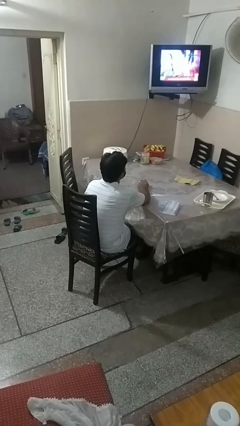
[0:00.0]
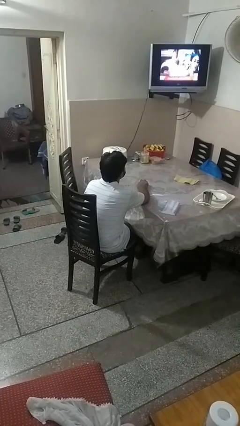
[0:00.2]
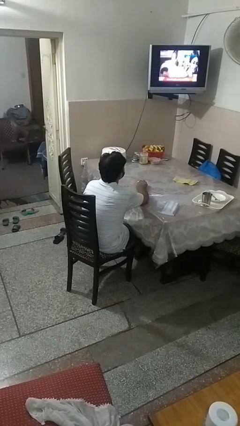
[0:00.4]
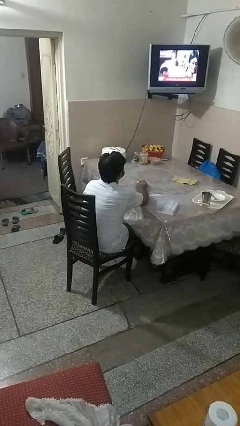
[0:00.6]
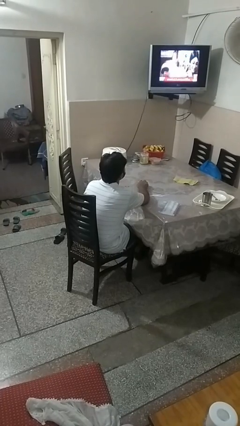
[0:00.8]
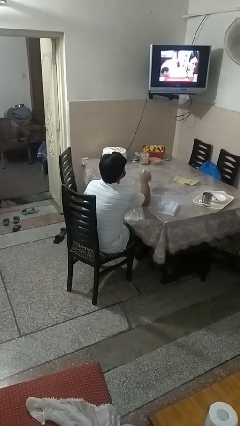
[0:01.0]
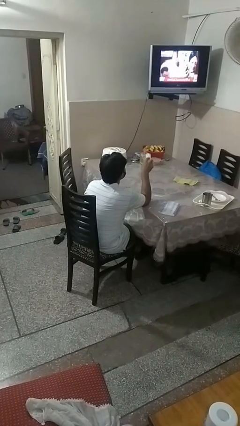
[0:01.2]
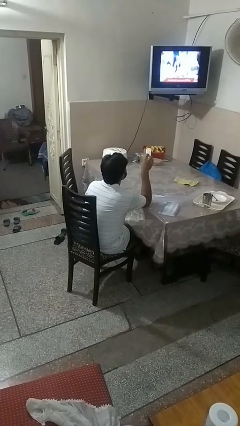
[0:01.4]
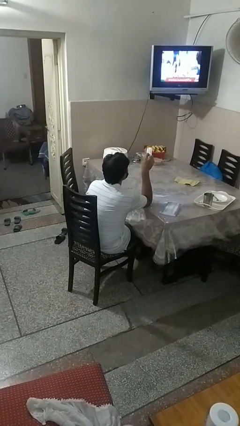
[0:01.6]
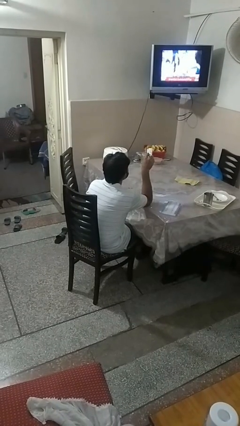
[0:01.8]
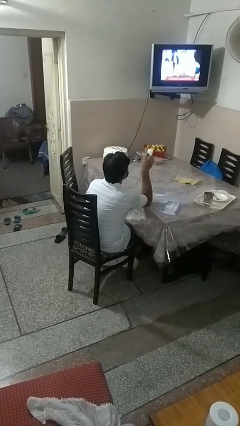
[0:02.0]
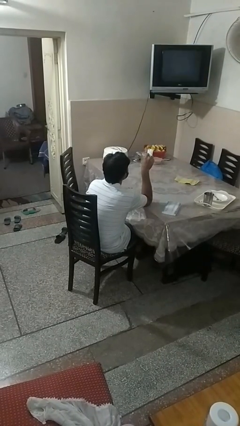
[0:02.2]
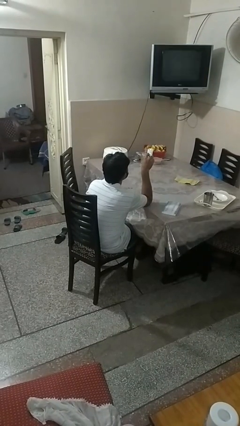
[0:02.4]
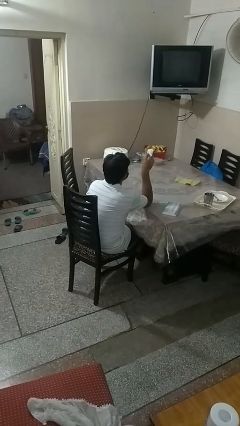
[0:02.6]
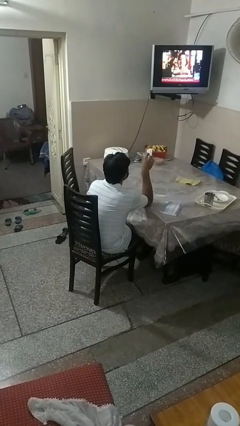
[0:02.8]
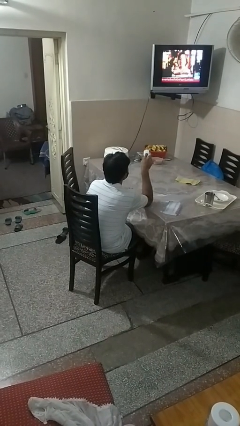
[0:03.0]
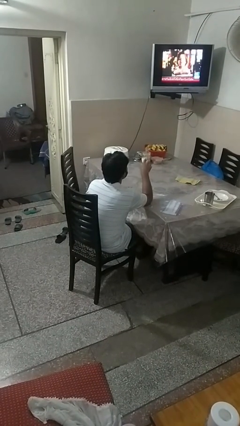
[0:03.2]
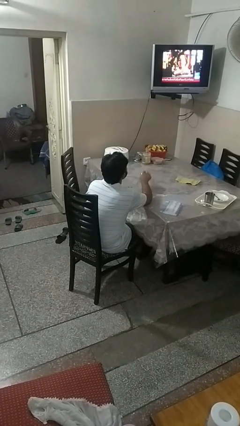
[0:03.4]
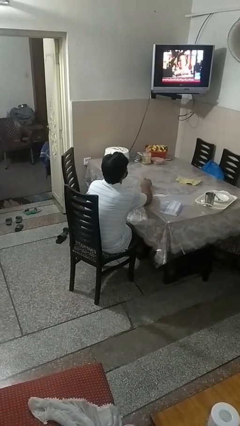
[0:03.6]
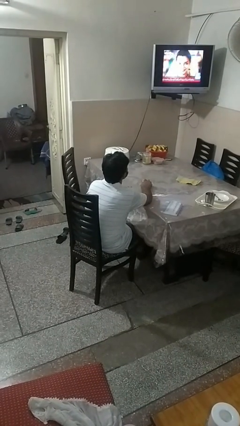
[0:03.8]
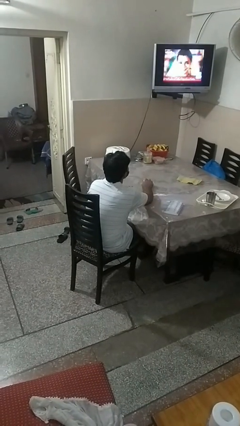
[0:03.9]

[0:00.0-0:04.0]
person uses television remote

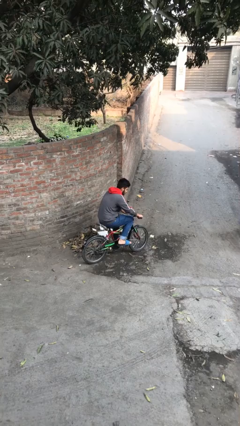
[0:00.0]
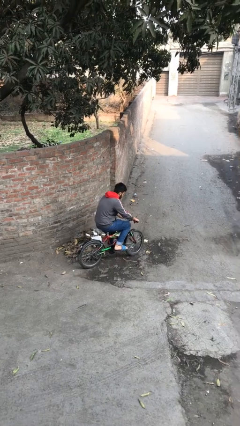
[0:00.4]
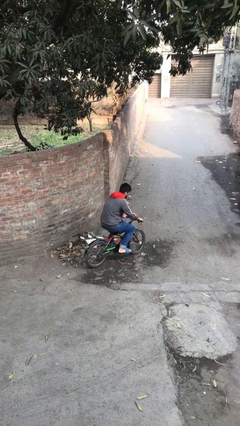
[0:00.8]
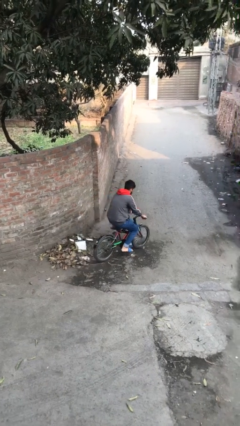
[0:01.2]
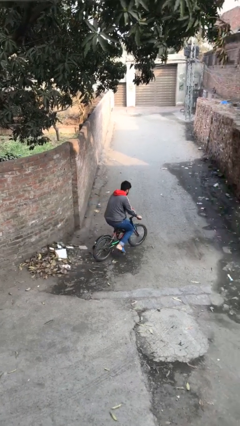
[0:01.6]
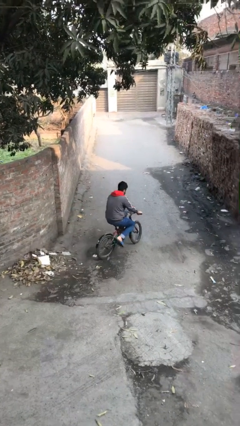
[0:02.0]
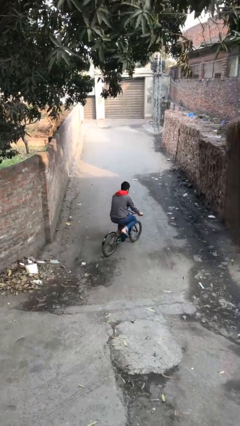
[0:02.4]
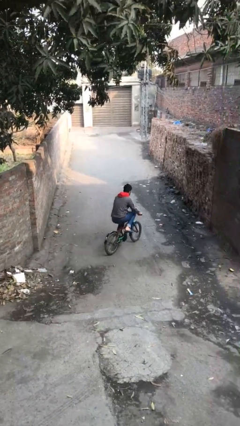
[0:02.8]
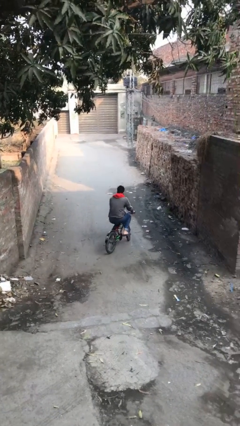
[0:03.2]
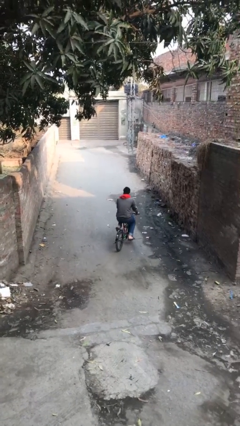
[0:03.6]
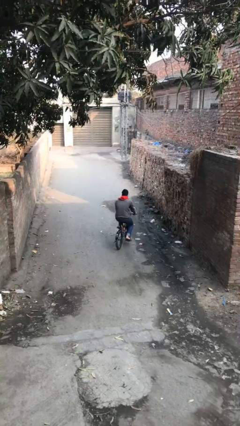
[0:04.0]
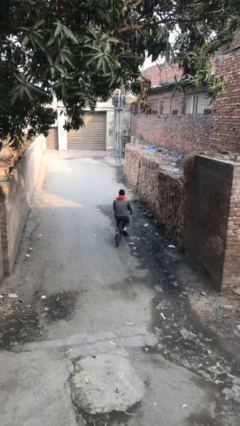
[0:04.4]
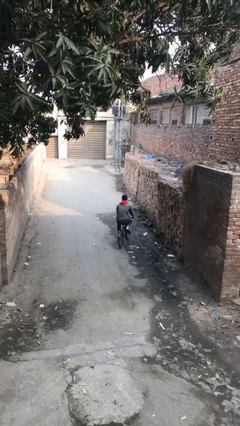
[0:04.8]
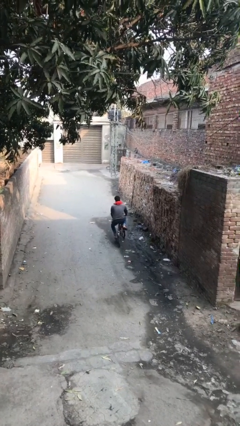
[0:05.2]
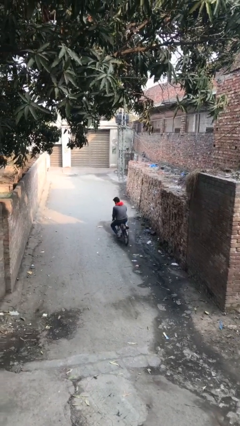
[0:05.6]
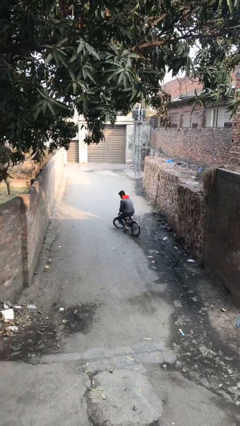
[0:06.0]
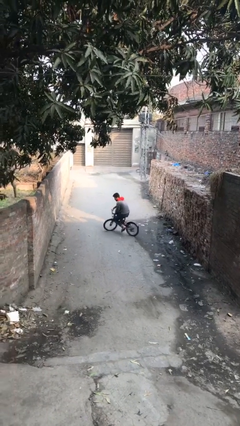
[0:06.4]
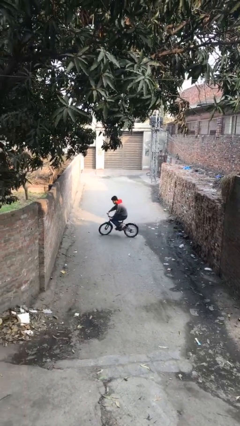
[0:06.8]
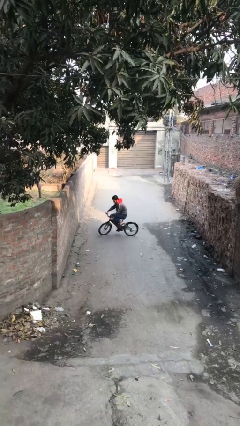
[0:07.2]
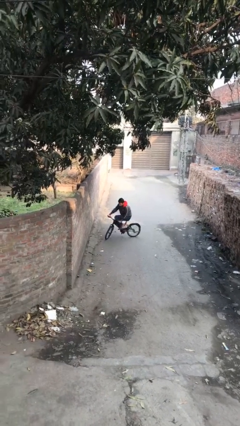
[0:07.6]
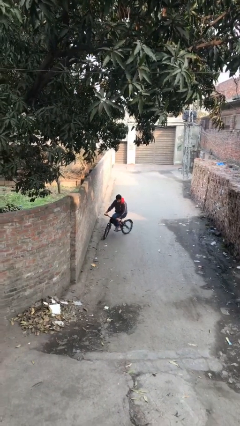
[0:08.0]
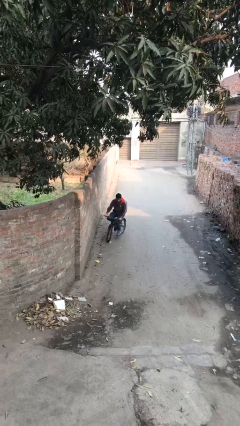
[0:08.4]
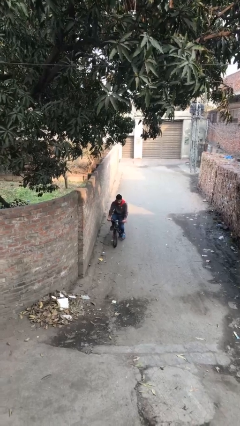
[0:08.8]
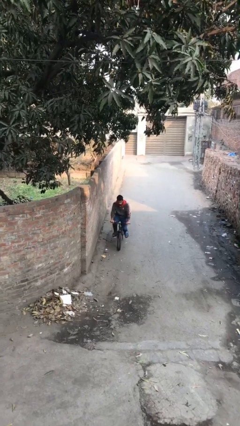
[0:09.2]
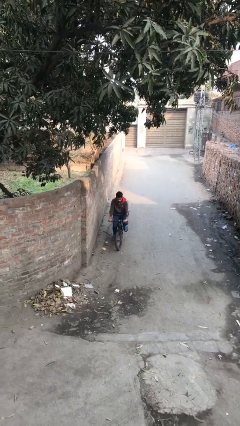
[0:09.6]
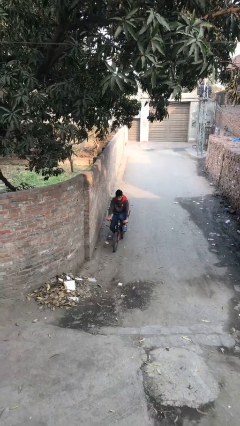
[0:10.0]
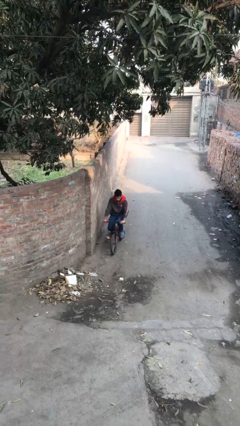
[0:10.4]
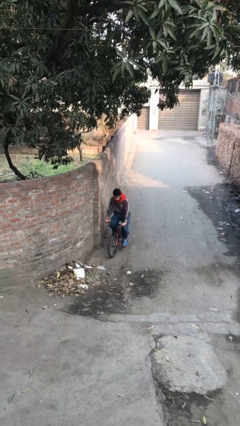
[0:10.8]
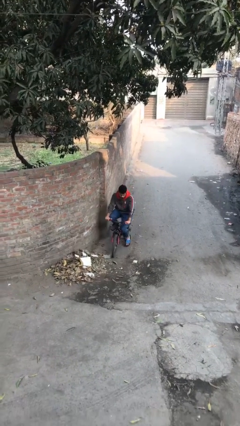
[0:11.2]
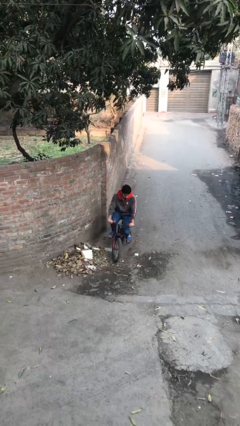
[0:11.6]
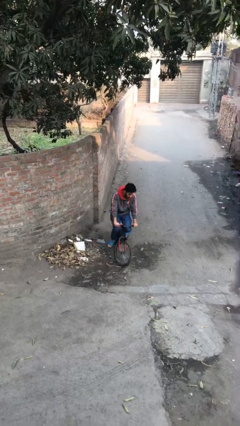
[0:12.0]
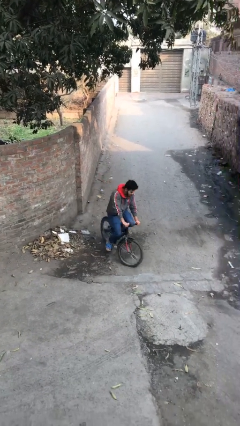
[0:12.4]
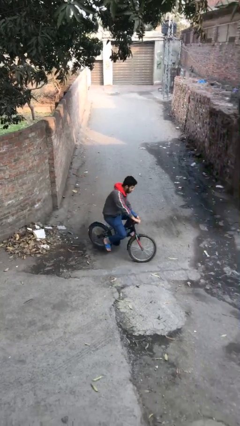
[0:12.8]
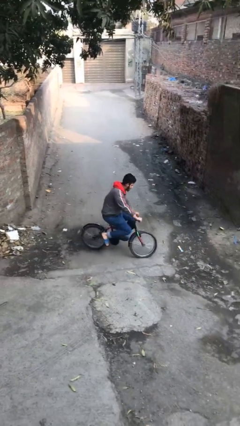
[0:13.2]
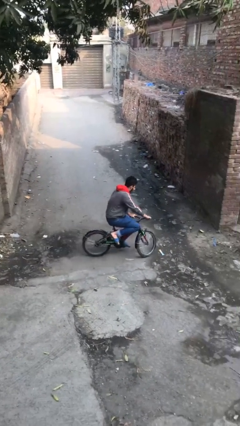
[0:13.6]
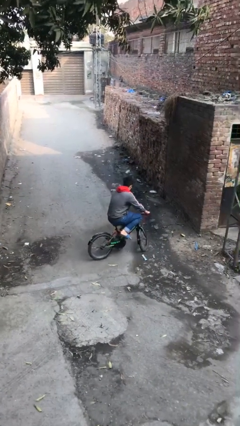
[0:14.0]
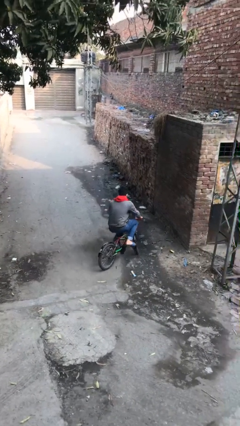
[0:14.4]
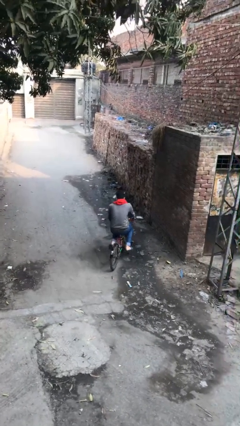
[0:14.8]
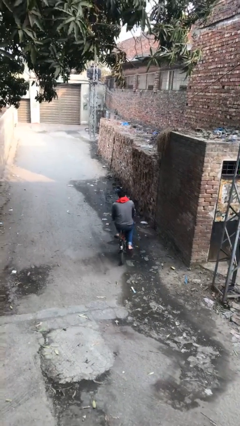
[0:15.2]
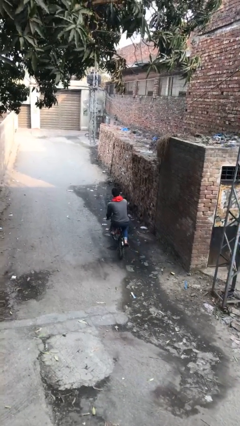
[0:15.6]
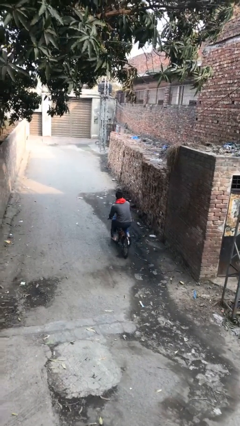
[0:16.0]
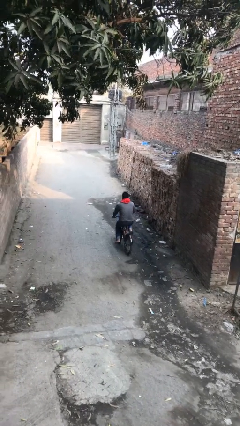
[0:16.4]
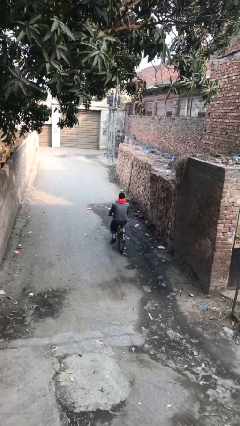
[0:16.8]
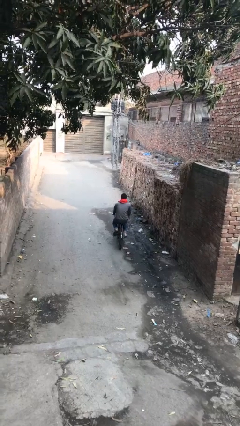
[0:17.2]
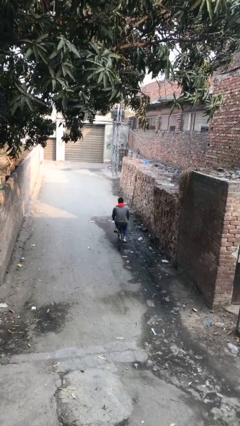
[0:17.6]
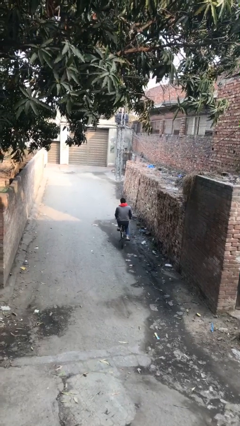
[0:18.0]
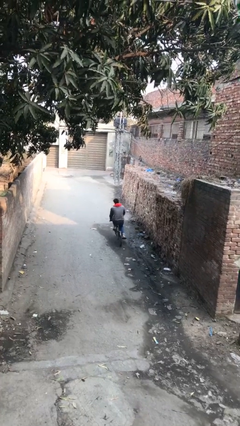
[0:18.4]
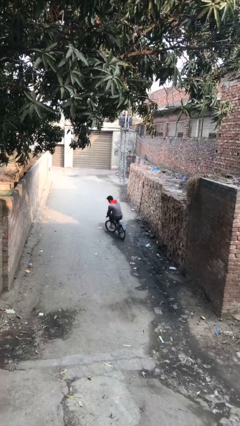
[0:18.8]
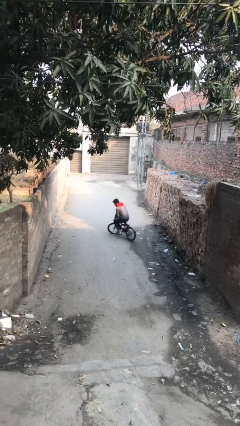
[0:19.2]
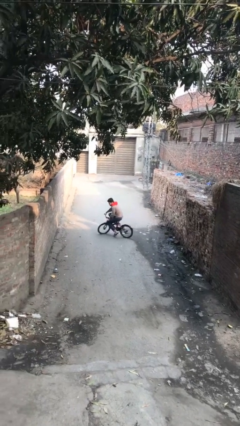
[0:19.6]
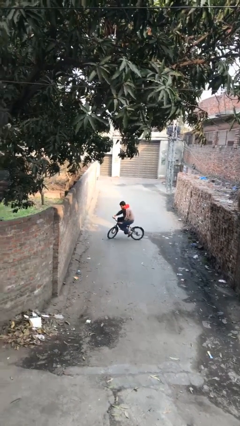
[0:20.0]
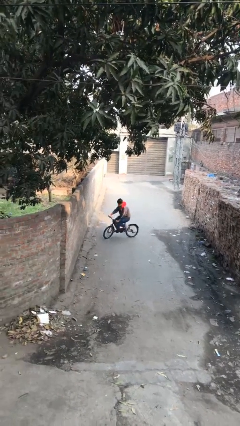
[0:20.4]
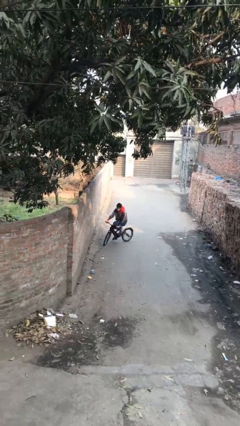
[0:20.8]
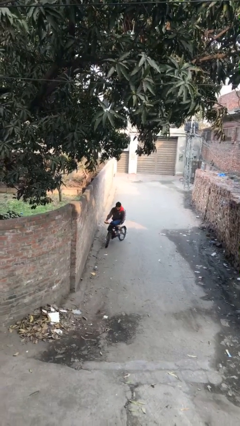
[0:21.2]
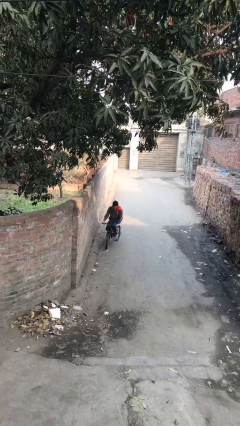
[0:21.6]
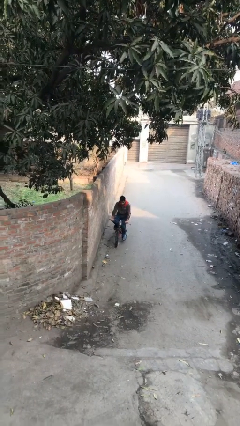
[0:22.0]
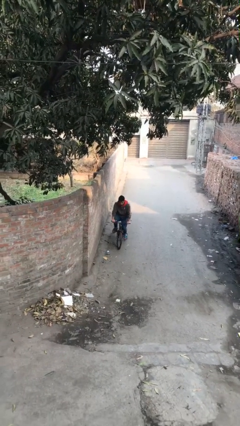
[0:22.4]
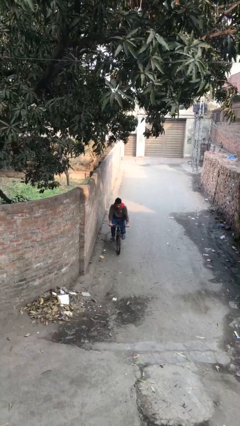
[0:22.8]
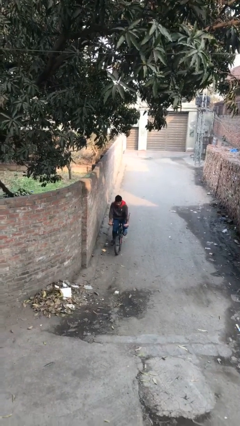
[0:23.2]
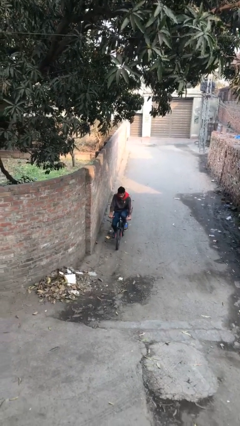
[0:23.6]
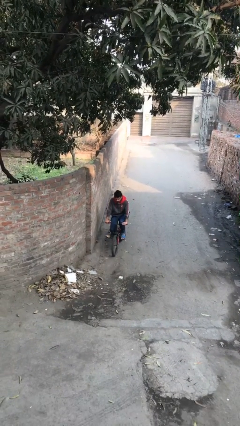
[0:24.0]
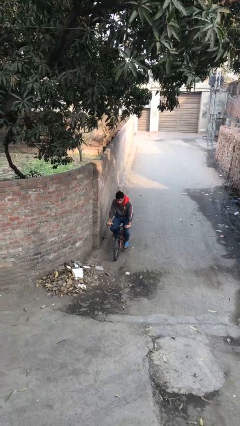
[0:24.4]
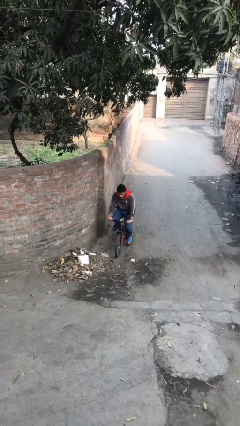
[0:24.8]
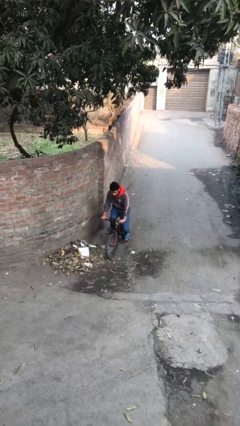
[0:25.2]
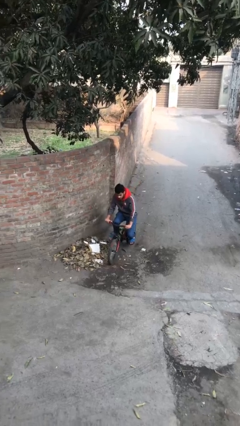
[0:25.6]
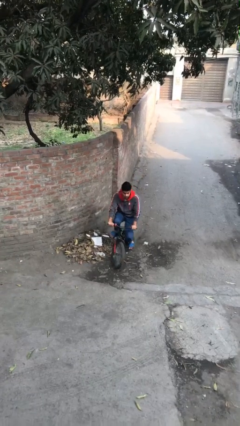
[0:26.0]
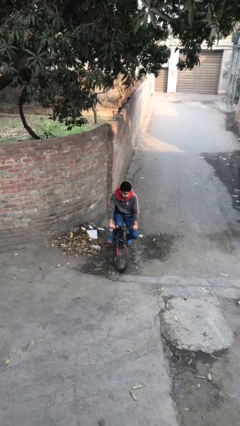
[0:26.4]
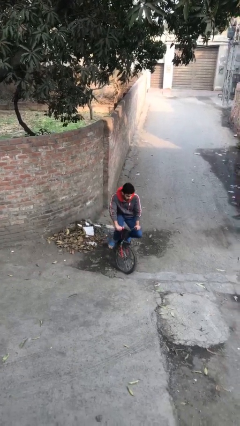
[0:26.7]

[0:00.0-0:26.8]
person rides bicycle

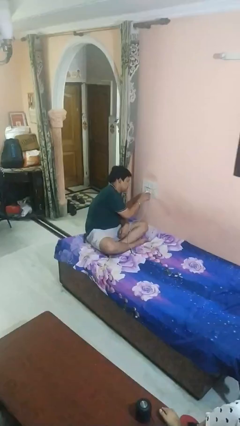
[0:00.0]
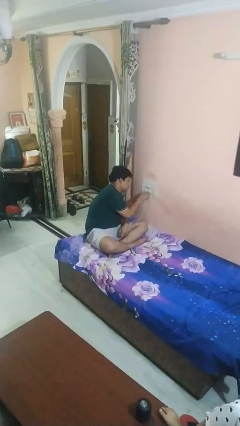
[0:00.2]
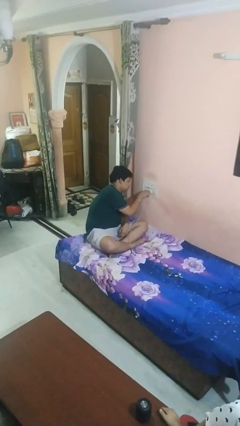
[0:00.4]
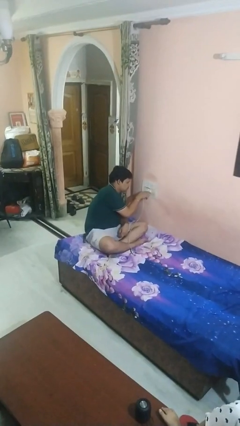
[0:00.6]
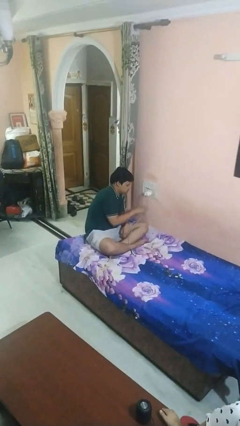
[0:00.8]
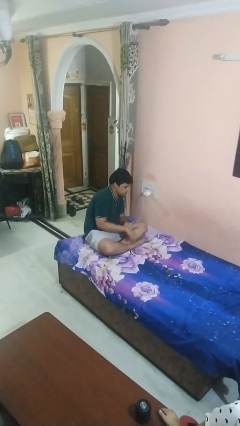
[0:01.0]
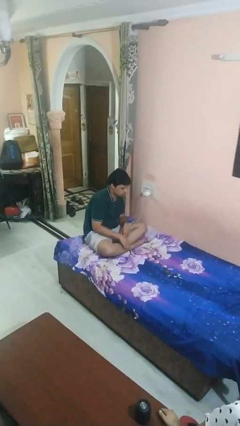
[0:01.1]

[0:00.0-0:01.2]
person plugs into electrical socket
